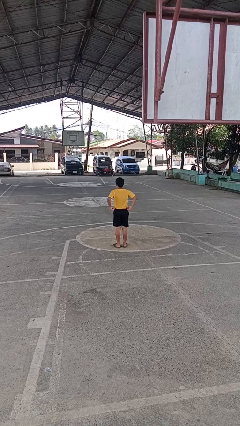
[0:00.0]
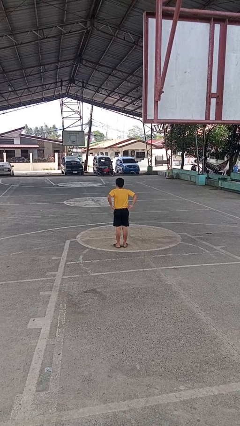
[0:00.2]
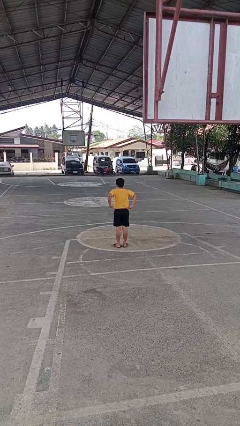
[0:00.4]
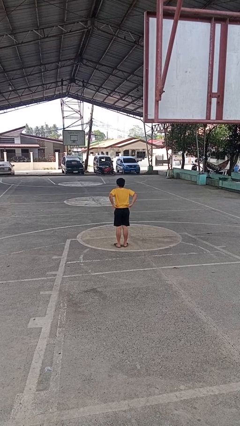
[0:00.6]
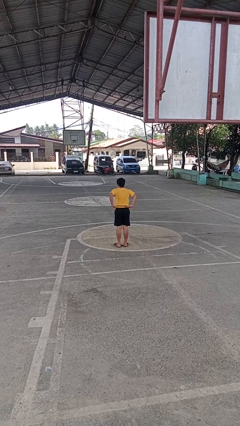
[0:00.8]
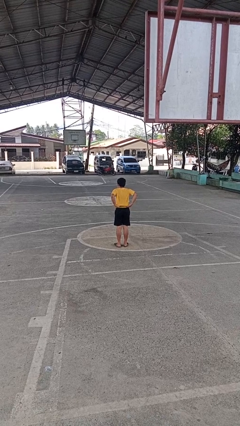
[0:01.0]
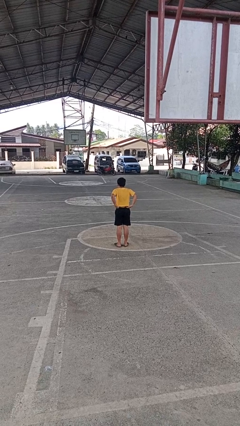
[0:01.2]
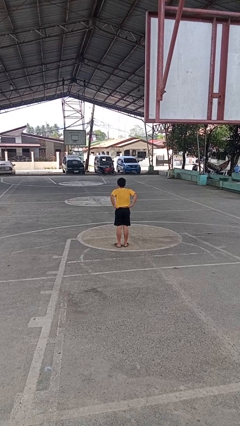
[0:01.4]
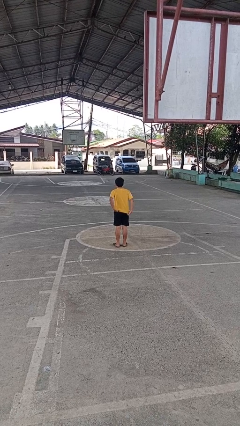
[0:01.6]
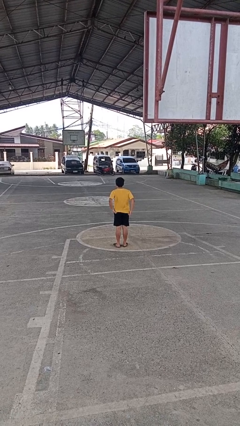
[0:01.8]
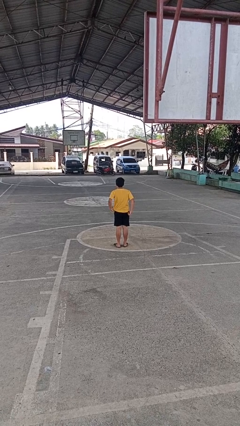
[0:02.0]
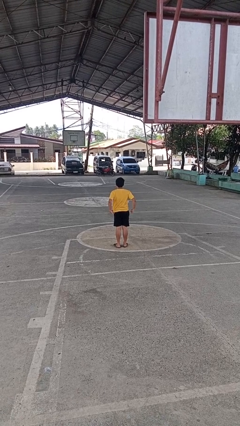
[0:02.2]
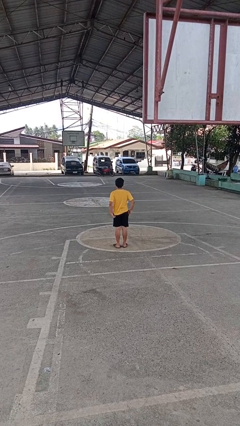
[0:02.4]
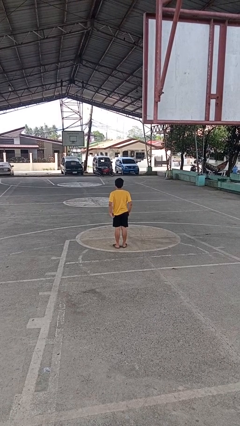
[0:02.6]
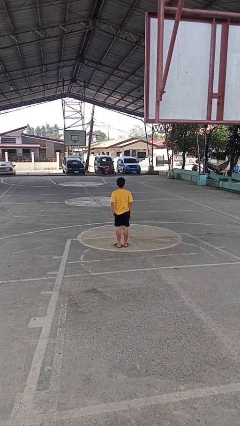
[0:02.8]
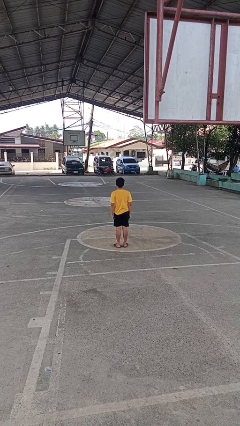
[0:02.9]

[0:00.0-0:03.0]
person untucks shirt

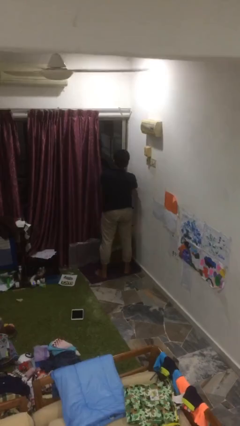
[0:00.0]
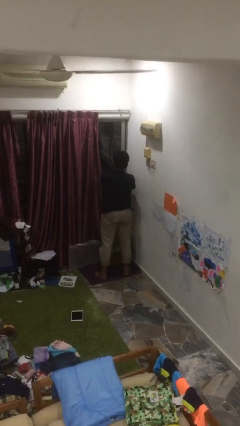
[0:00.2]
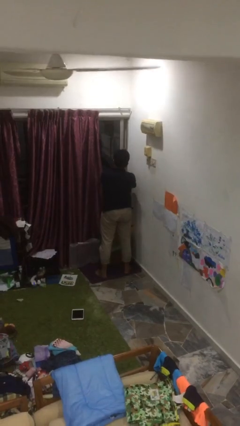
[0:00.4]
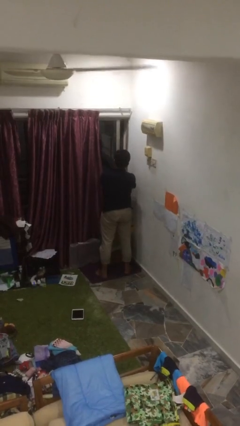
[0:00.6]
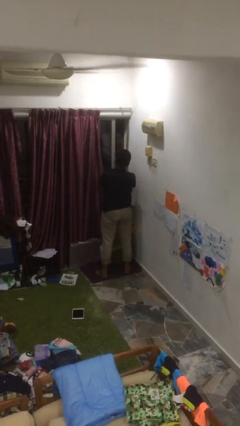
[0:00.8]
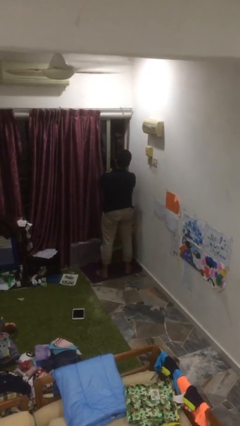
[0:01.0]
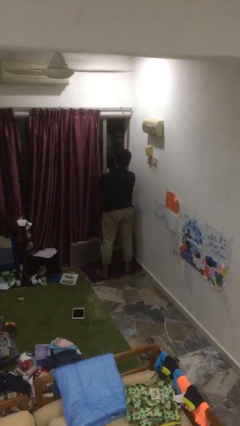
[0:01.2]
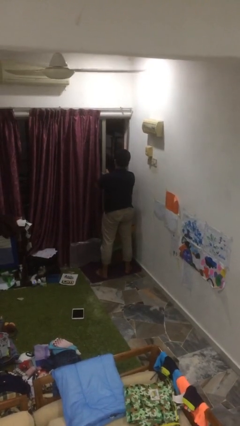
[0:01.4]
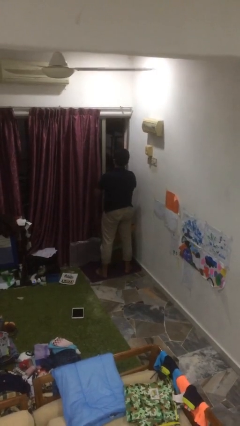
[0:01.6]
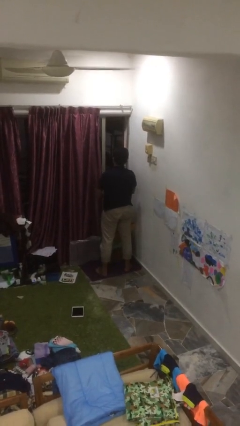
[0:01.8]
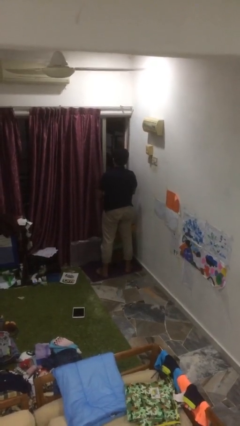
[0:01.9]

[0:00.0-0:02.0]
person opens home window

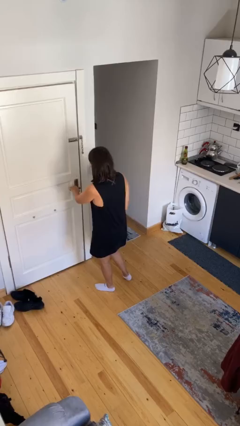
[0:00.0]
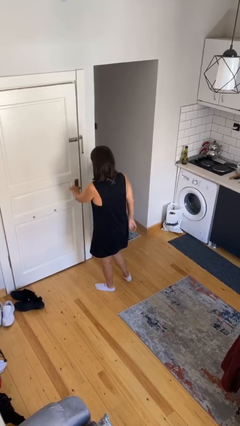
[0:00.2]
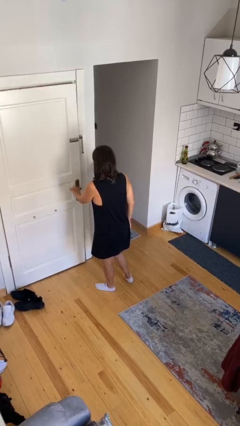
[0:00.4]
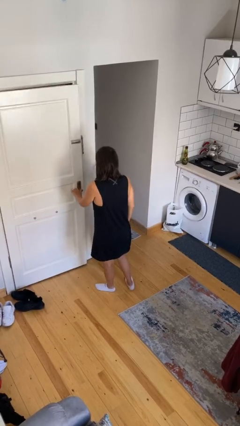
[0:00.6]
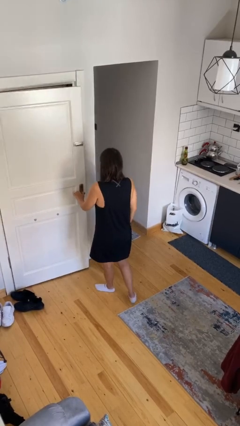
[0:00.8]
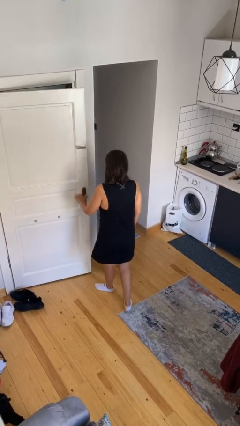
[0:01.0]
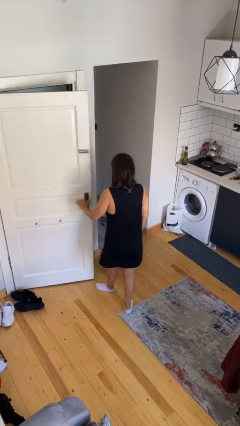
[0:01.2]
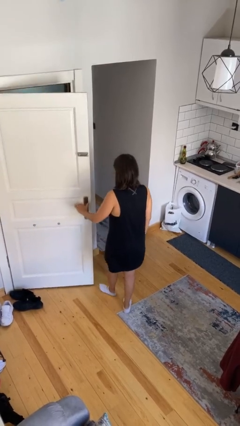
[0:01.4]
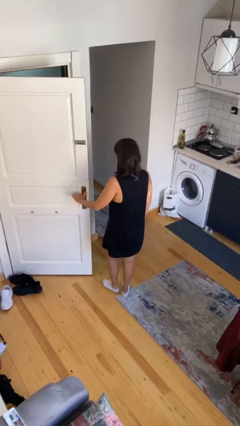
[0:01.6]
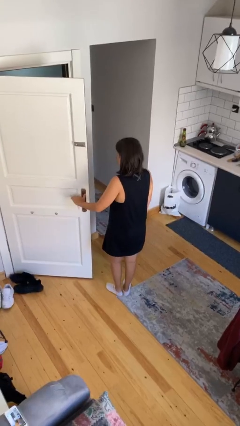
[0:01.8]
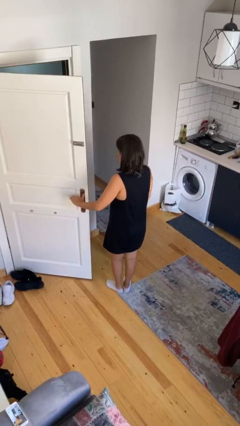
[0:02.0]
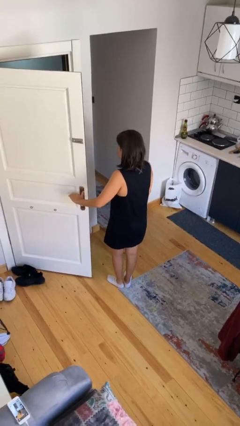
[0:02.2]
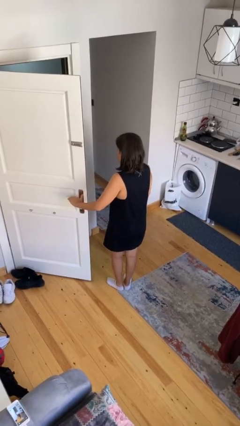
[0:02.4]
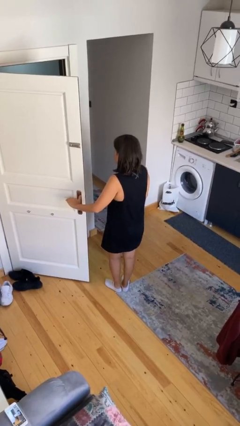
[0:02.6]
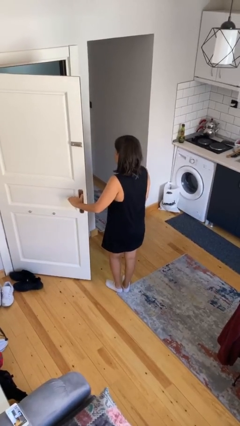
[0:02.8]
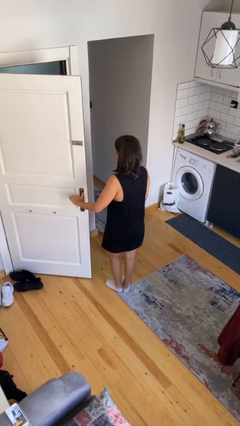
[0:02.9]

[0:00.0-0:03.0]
person opens facility door

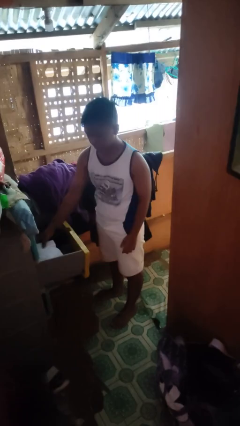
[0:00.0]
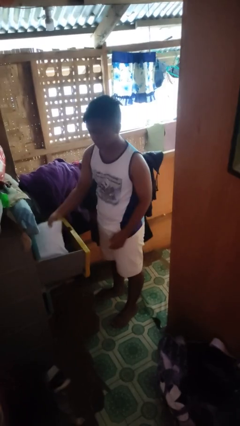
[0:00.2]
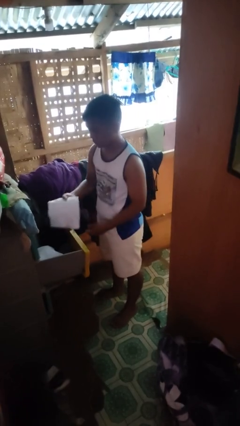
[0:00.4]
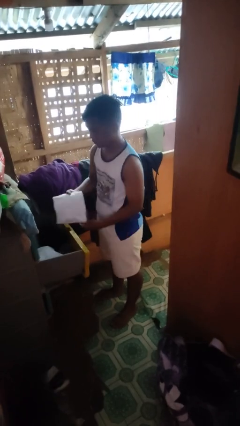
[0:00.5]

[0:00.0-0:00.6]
person takes clothes from dresser

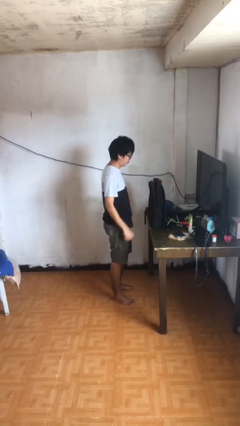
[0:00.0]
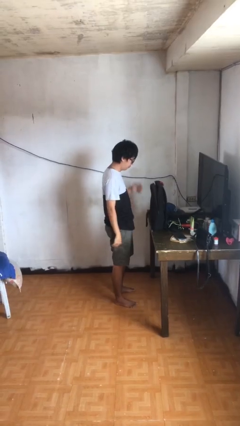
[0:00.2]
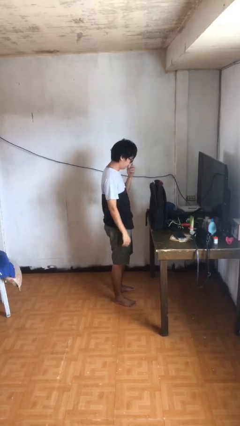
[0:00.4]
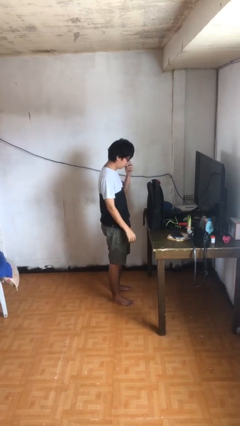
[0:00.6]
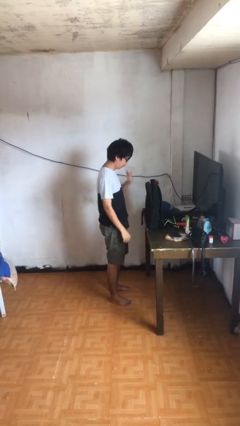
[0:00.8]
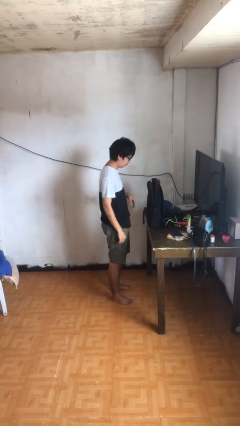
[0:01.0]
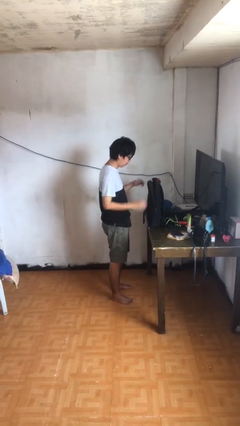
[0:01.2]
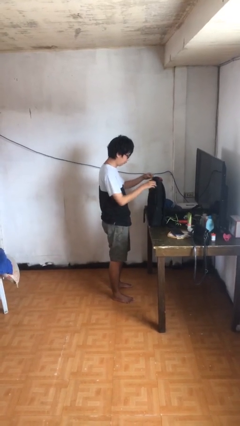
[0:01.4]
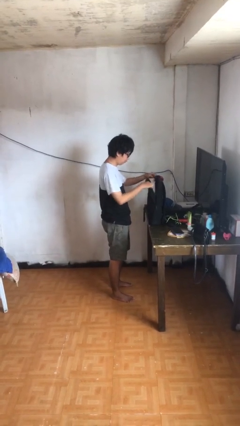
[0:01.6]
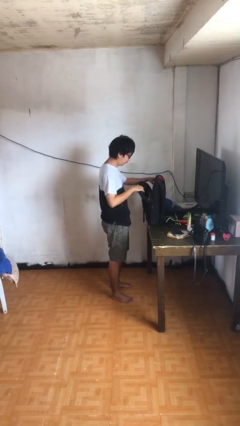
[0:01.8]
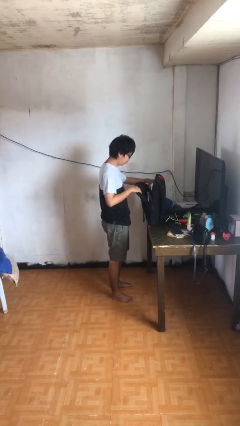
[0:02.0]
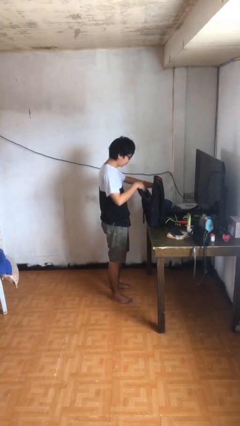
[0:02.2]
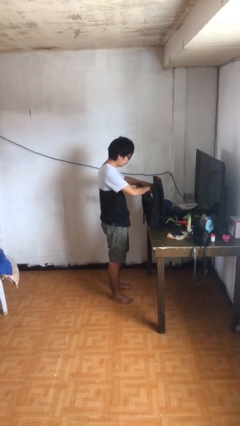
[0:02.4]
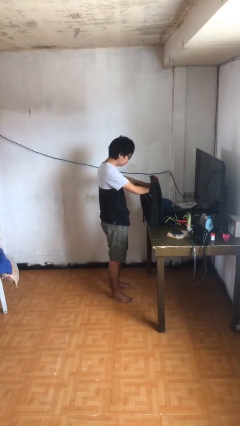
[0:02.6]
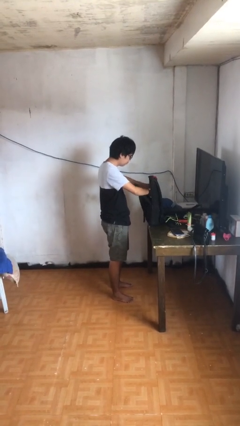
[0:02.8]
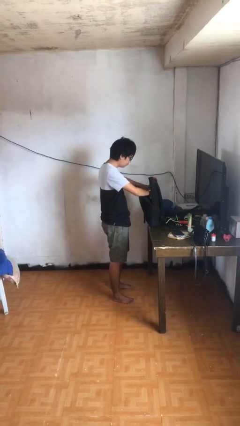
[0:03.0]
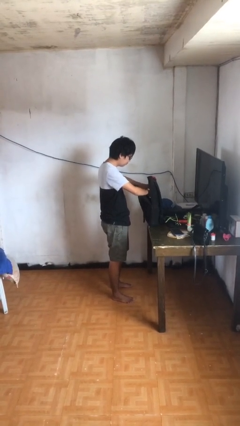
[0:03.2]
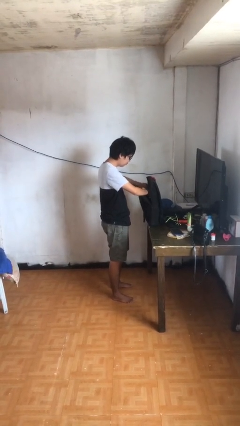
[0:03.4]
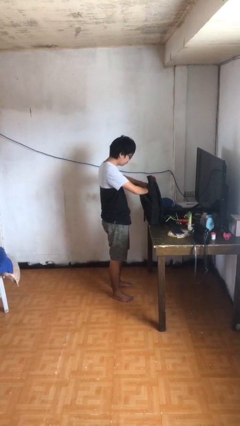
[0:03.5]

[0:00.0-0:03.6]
person searches in backpack

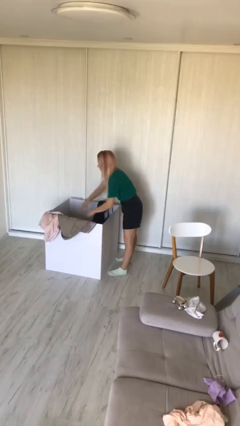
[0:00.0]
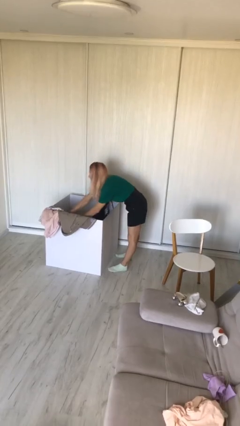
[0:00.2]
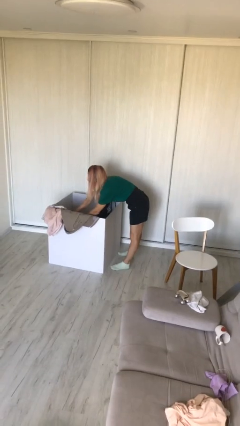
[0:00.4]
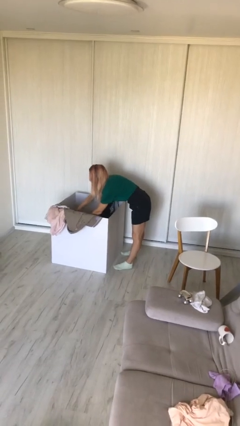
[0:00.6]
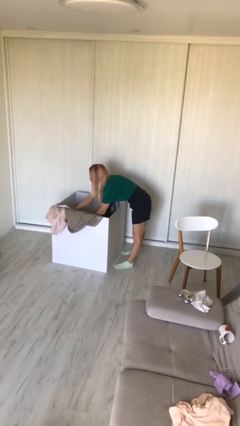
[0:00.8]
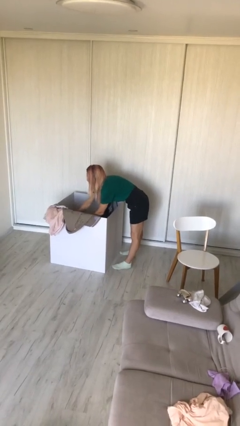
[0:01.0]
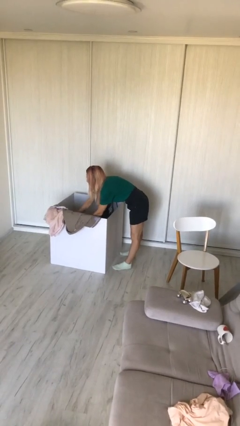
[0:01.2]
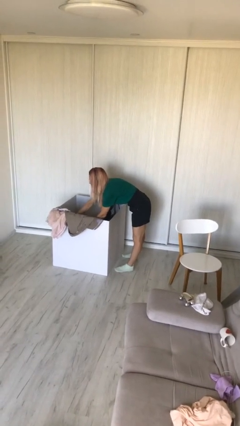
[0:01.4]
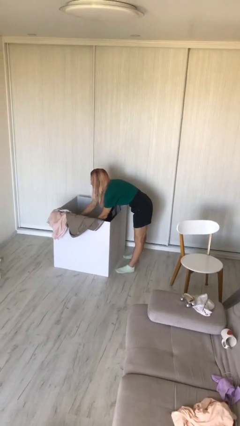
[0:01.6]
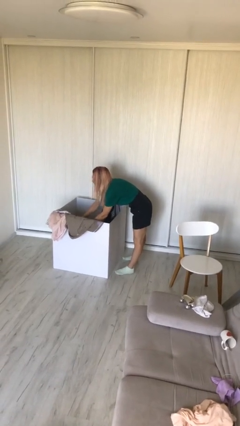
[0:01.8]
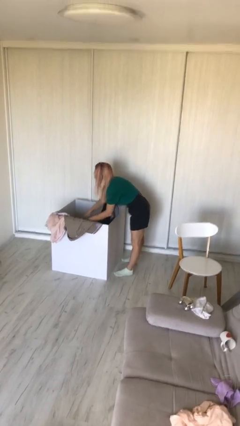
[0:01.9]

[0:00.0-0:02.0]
person searches in box

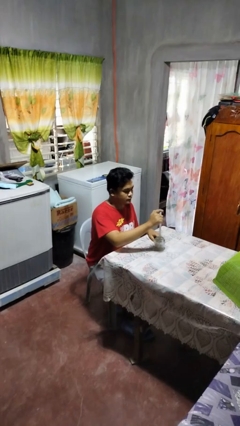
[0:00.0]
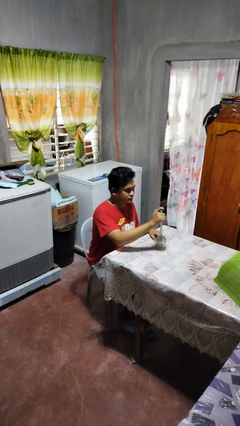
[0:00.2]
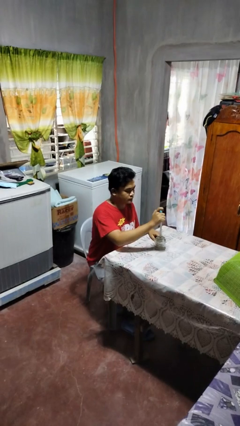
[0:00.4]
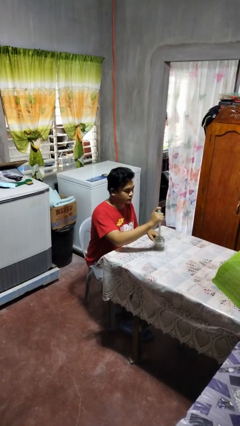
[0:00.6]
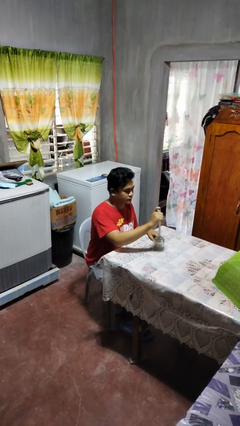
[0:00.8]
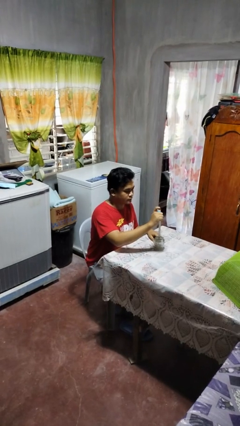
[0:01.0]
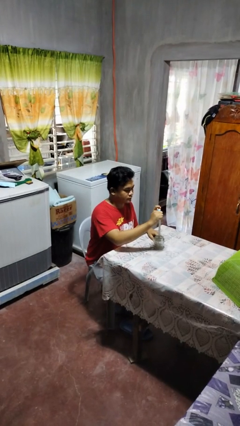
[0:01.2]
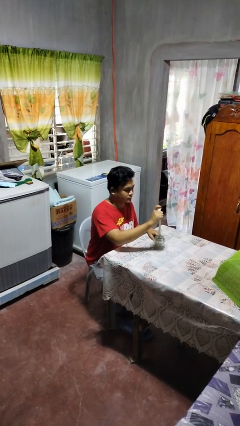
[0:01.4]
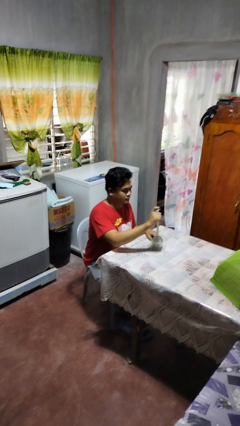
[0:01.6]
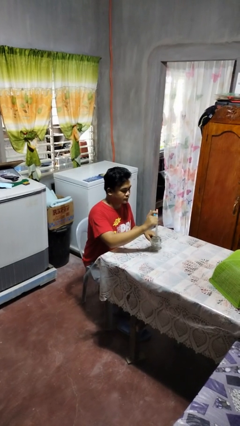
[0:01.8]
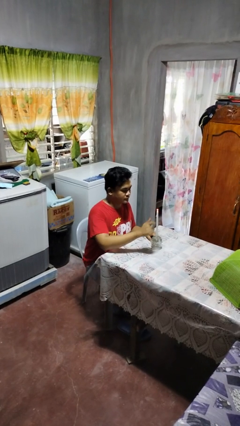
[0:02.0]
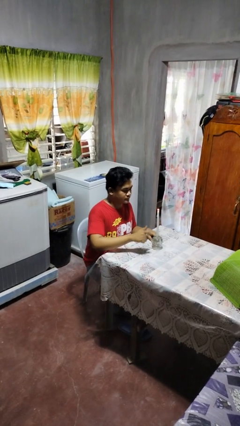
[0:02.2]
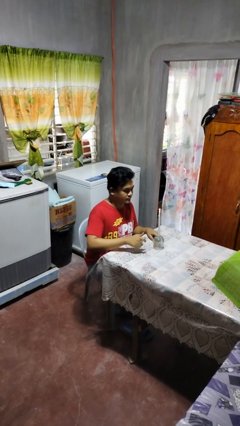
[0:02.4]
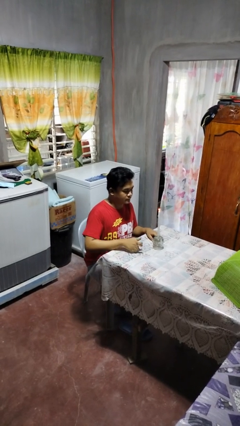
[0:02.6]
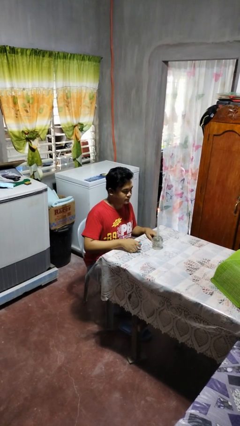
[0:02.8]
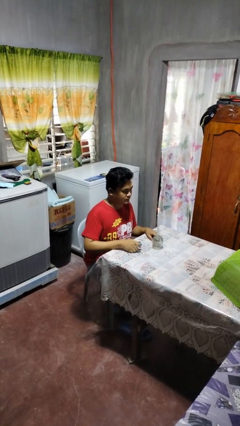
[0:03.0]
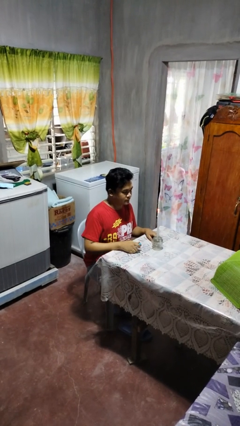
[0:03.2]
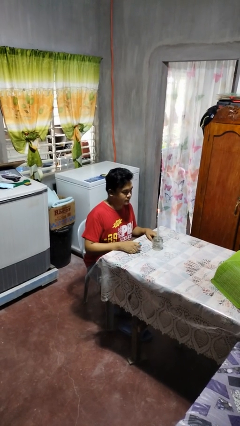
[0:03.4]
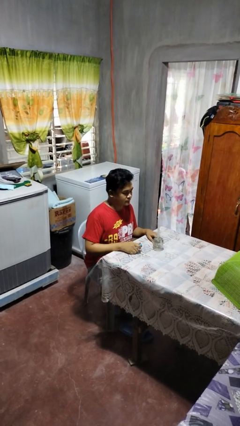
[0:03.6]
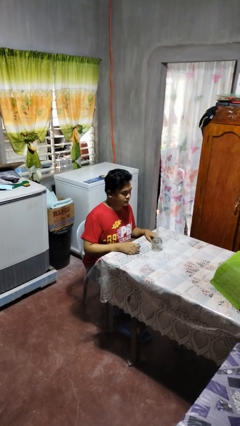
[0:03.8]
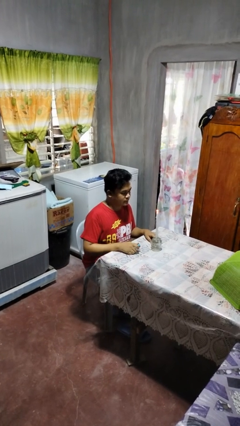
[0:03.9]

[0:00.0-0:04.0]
person lights candle
